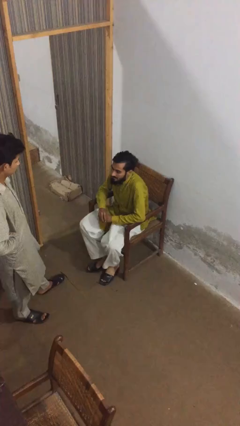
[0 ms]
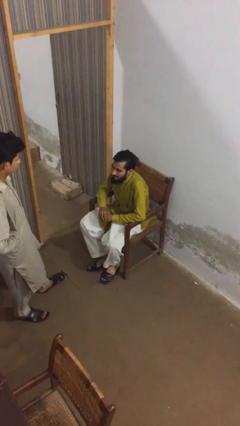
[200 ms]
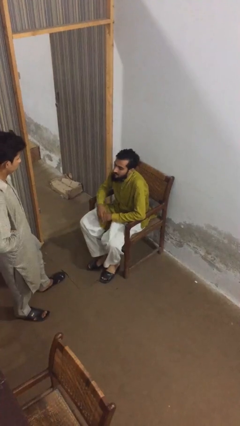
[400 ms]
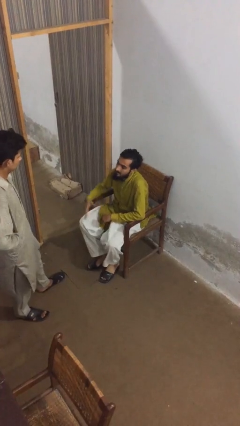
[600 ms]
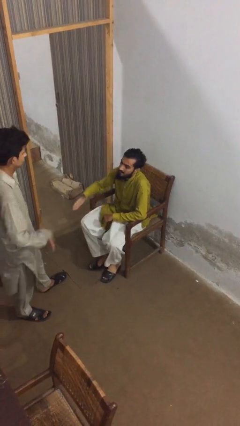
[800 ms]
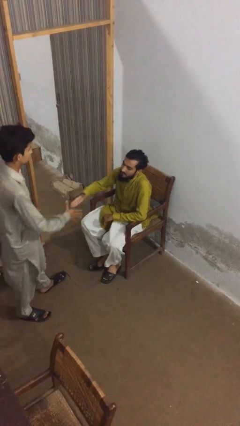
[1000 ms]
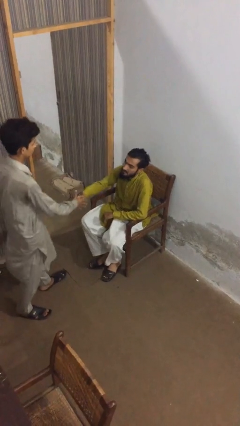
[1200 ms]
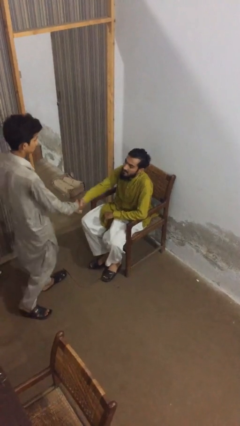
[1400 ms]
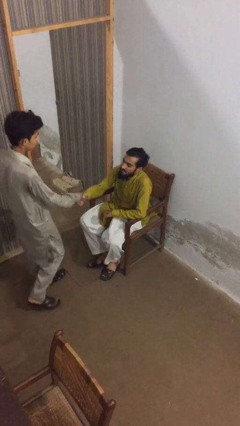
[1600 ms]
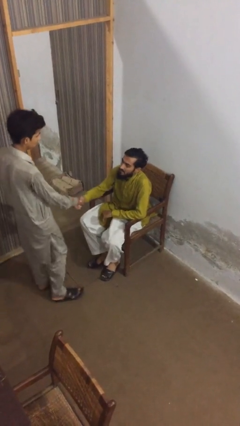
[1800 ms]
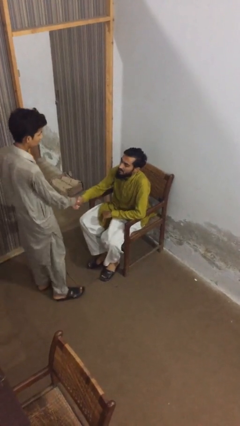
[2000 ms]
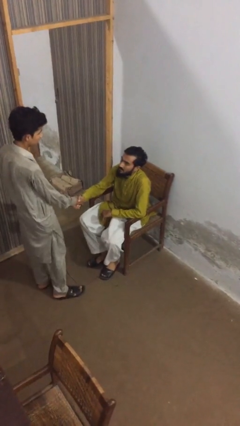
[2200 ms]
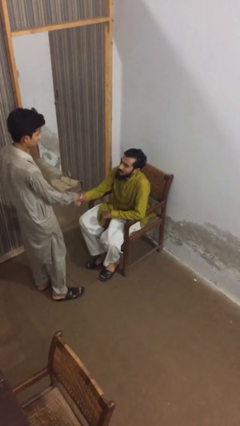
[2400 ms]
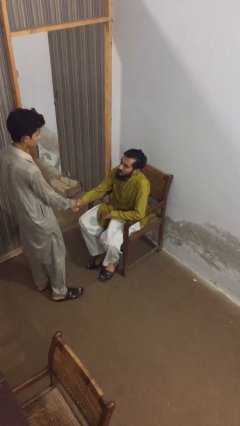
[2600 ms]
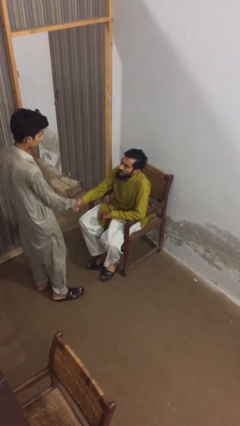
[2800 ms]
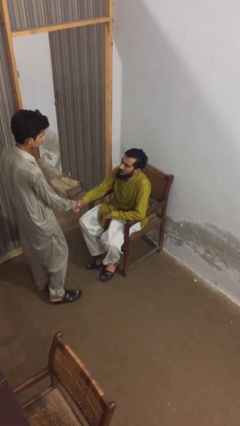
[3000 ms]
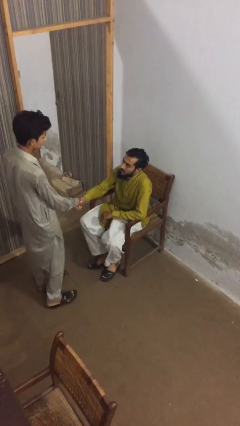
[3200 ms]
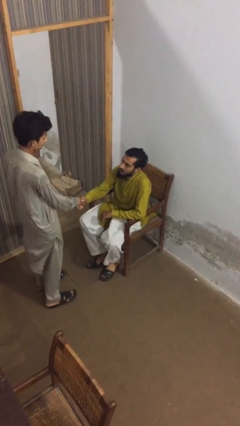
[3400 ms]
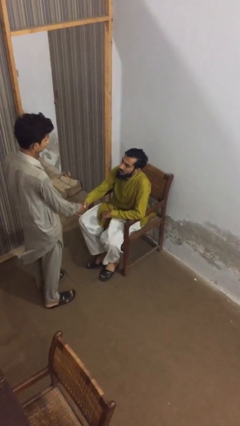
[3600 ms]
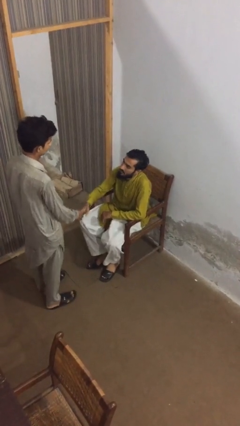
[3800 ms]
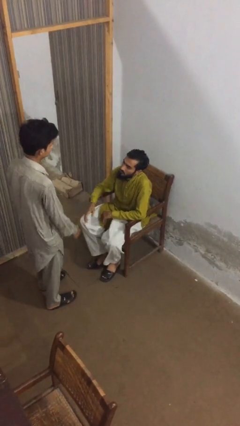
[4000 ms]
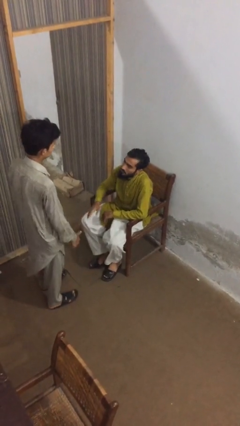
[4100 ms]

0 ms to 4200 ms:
person shakes hand

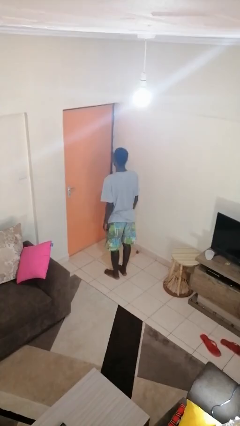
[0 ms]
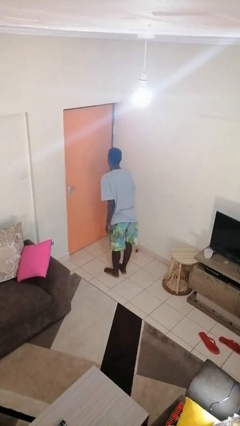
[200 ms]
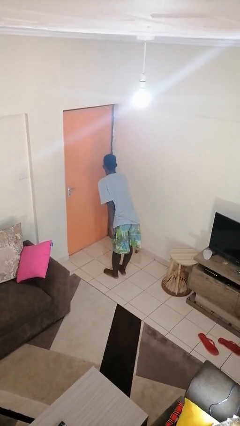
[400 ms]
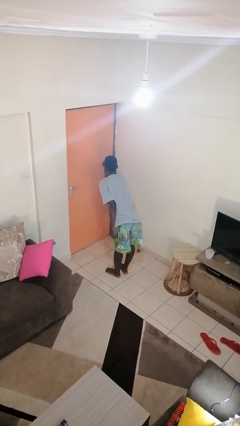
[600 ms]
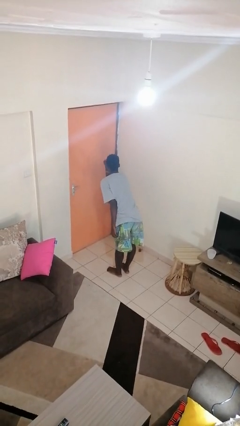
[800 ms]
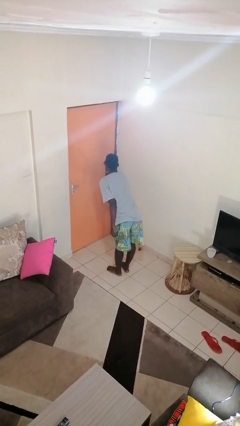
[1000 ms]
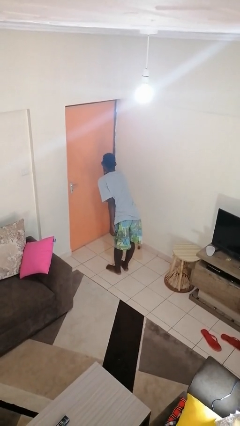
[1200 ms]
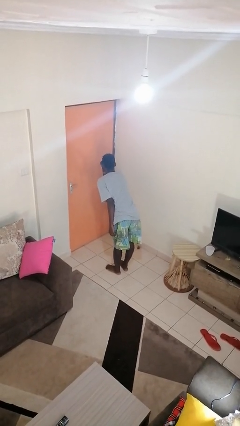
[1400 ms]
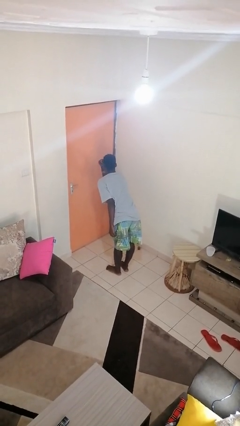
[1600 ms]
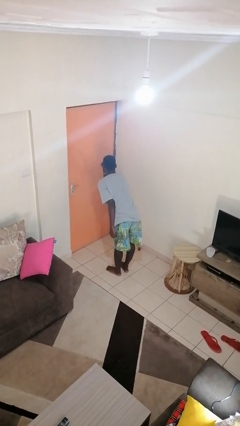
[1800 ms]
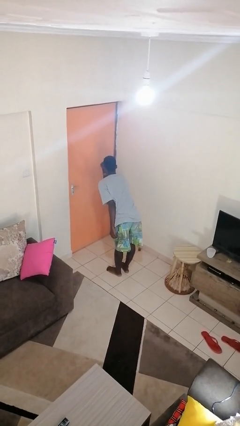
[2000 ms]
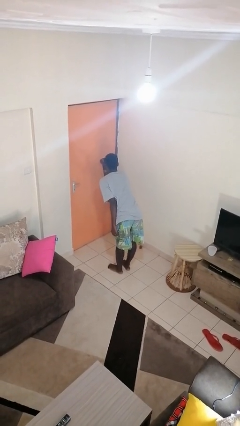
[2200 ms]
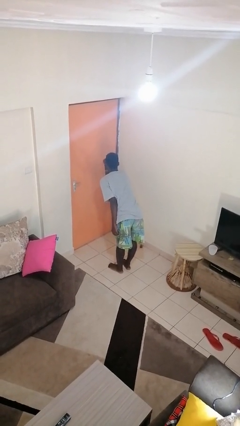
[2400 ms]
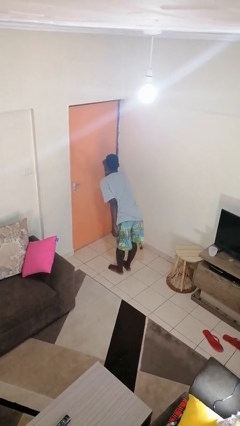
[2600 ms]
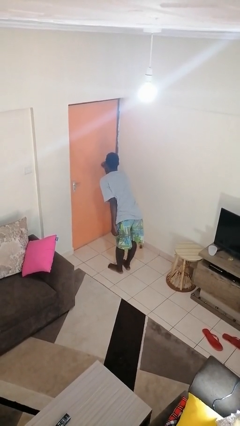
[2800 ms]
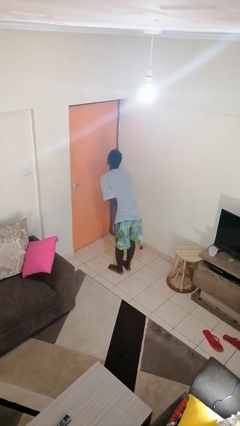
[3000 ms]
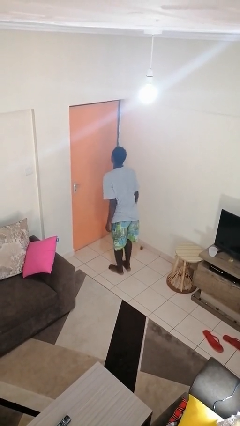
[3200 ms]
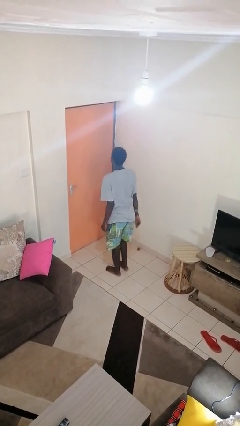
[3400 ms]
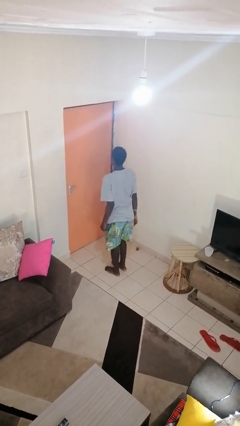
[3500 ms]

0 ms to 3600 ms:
person gestures watch closely

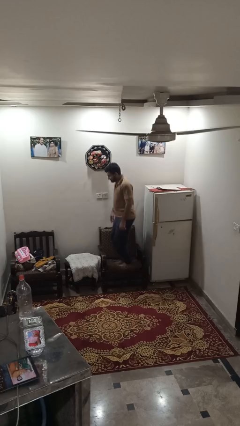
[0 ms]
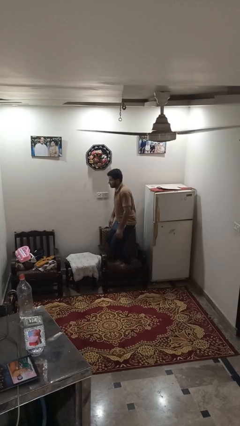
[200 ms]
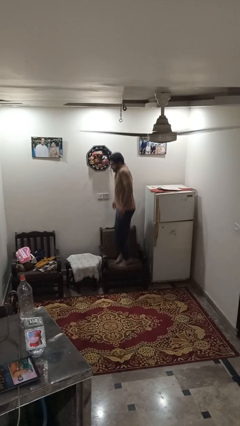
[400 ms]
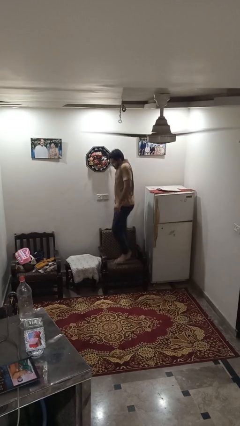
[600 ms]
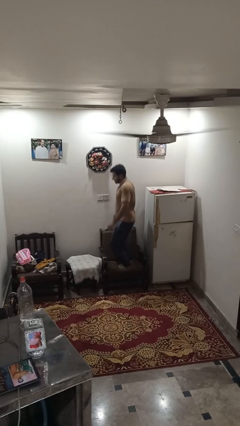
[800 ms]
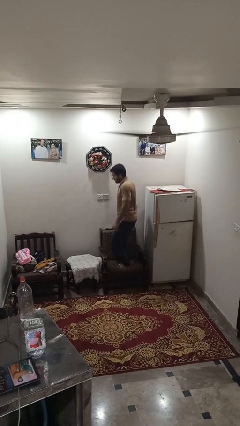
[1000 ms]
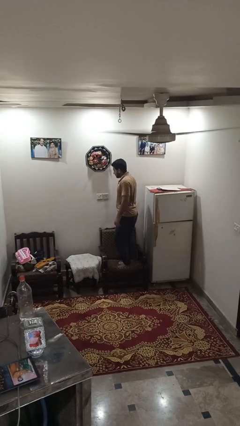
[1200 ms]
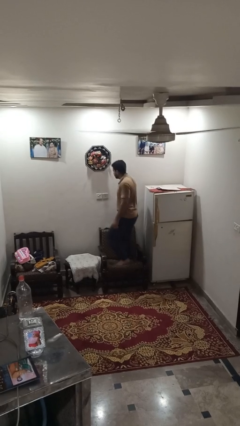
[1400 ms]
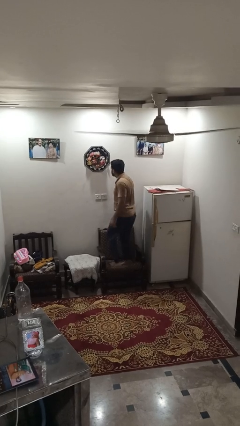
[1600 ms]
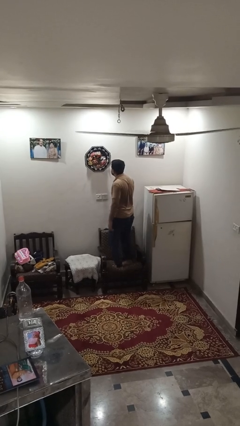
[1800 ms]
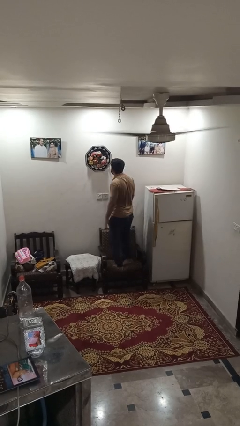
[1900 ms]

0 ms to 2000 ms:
person jumps on couch

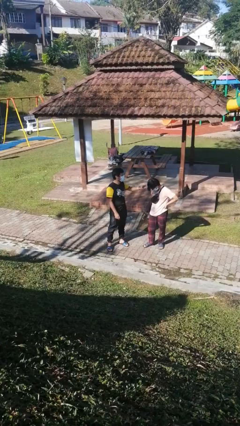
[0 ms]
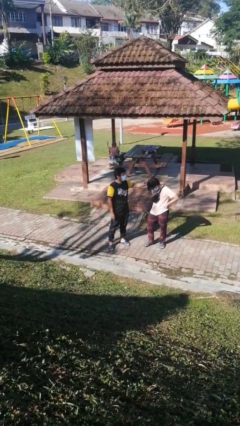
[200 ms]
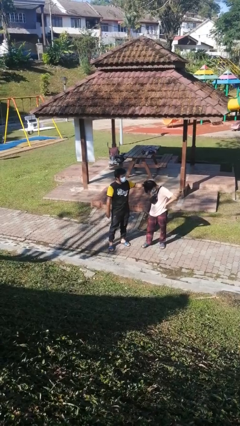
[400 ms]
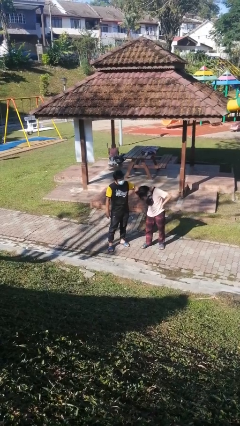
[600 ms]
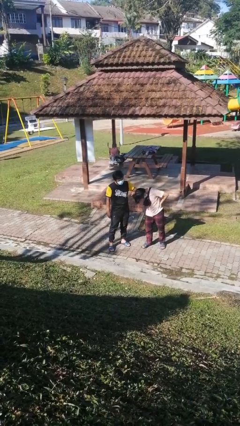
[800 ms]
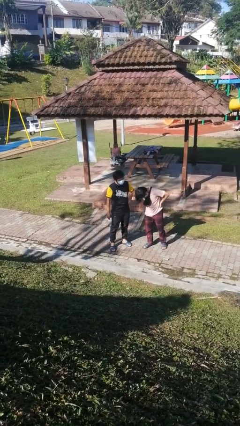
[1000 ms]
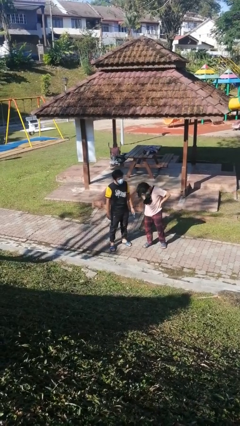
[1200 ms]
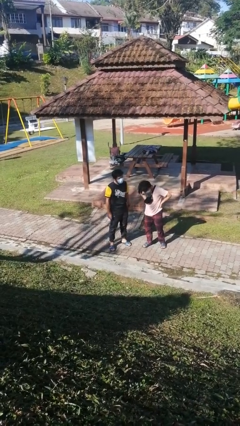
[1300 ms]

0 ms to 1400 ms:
person grabs person by hair

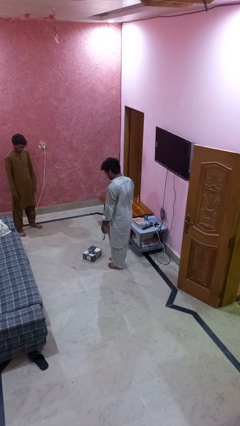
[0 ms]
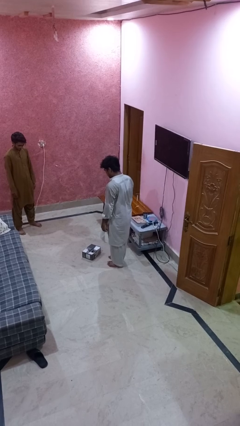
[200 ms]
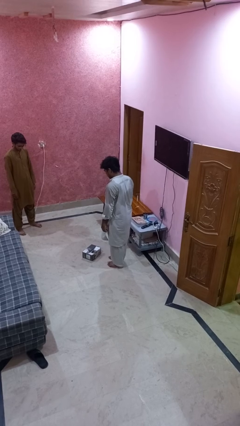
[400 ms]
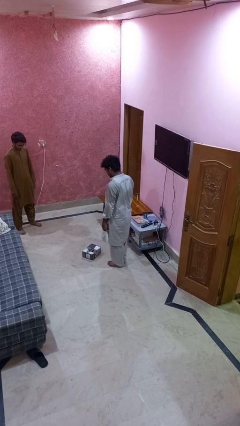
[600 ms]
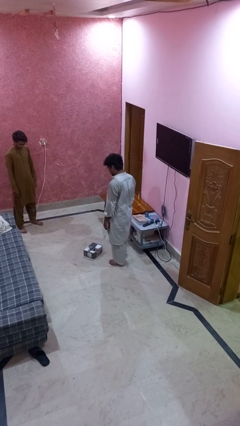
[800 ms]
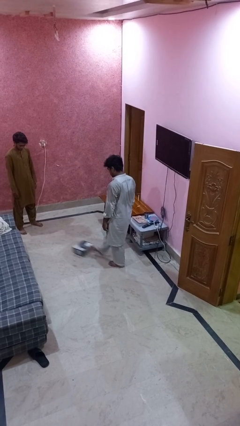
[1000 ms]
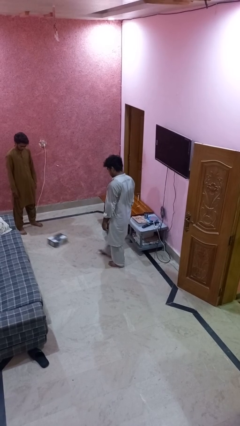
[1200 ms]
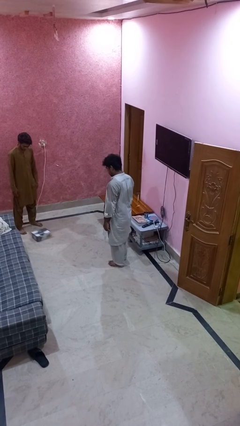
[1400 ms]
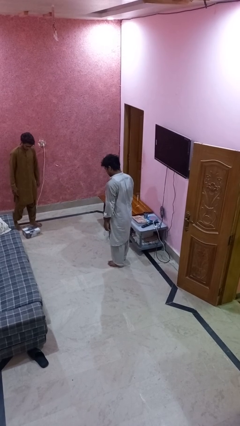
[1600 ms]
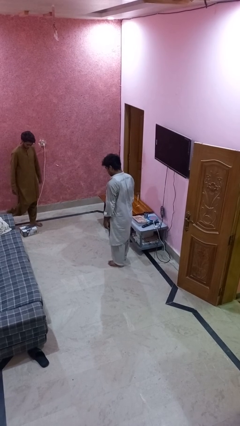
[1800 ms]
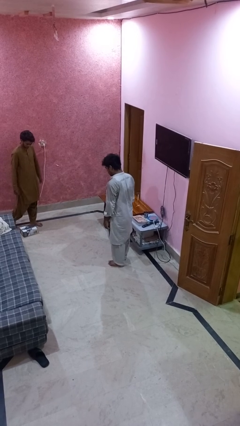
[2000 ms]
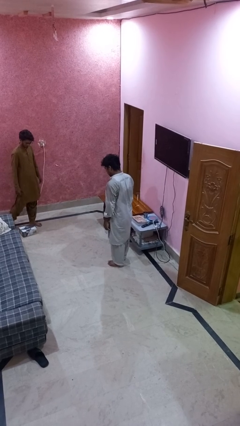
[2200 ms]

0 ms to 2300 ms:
person kicks object to person

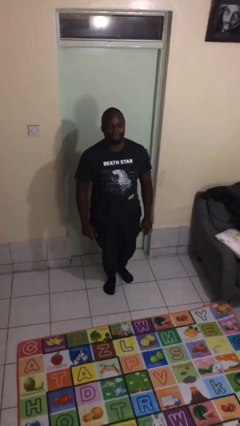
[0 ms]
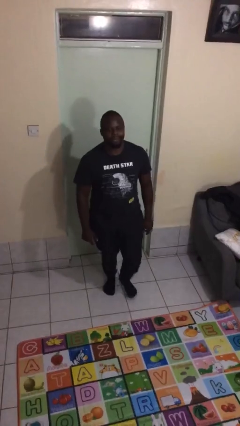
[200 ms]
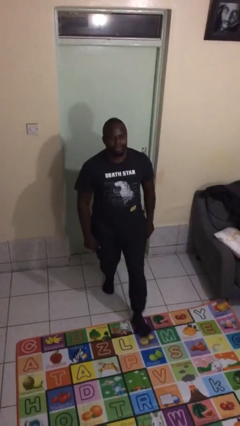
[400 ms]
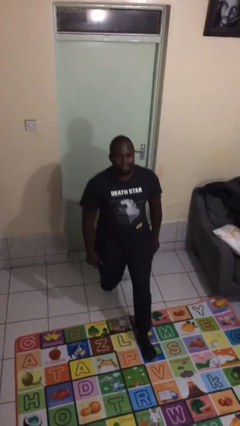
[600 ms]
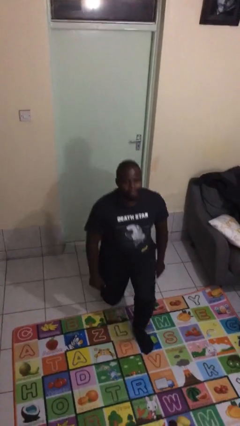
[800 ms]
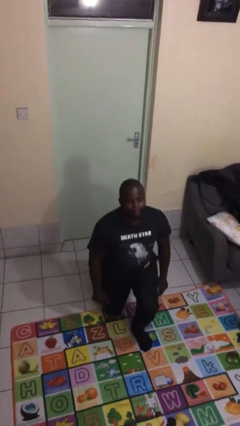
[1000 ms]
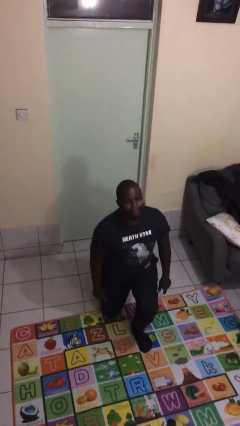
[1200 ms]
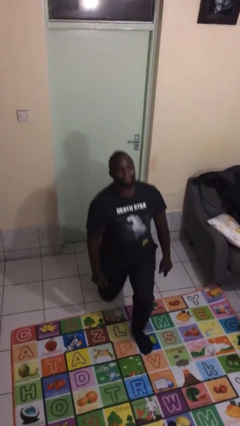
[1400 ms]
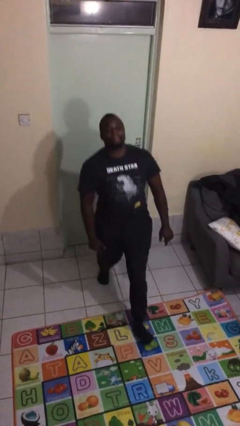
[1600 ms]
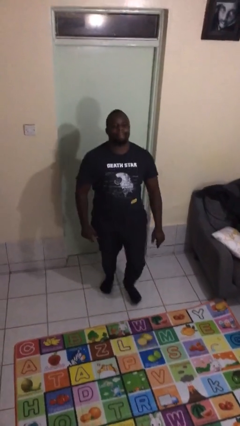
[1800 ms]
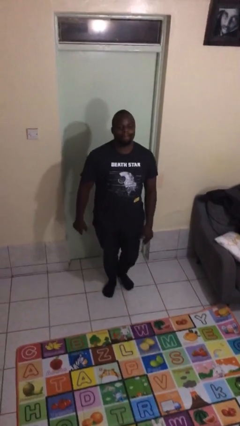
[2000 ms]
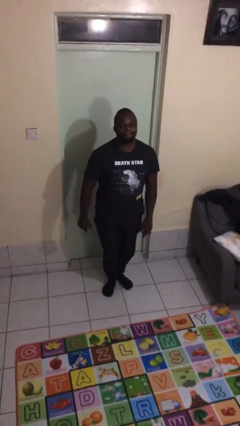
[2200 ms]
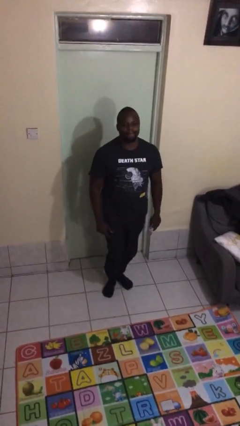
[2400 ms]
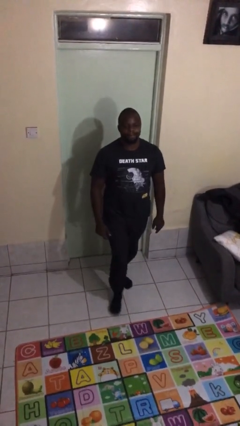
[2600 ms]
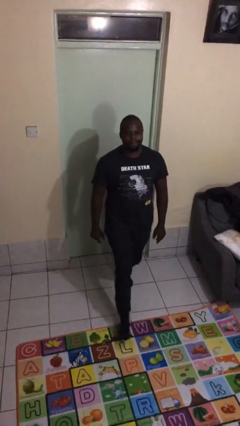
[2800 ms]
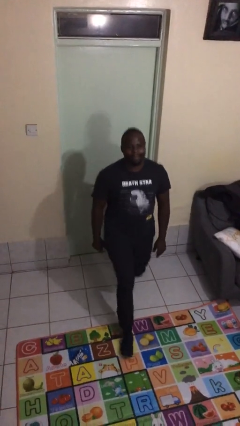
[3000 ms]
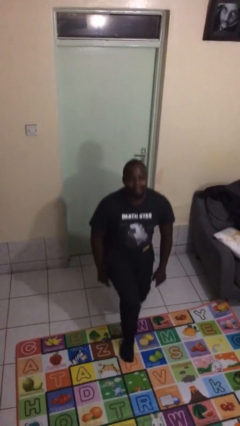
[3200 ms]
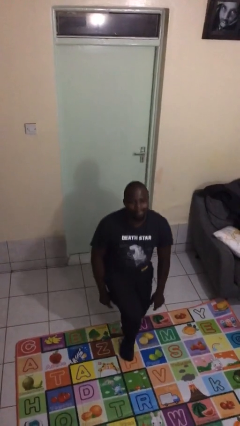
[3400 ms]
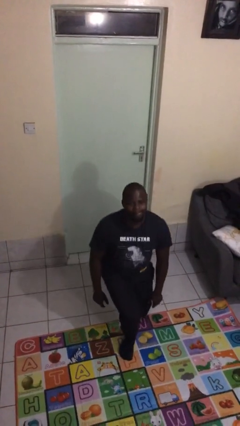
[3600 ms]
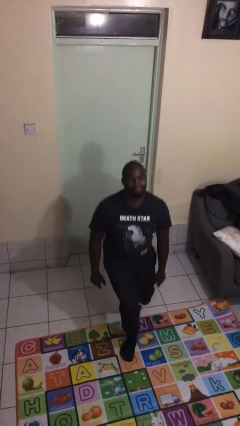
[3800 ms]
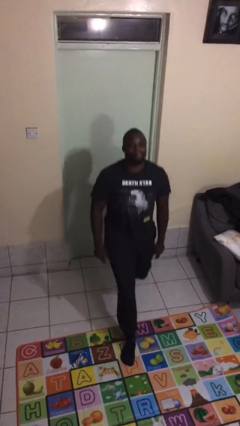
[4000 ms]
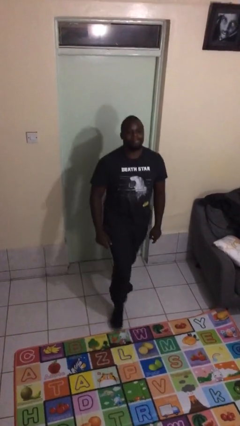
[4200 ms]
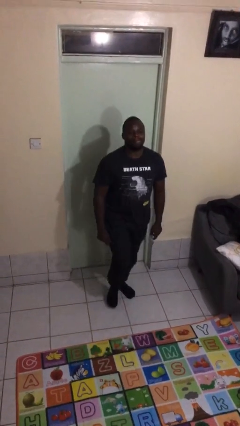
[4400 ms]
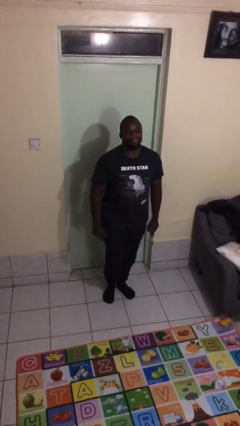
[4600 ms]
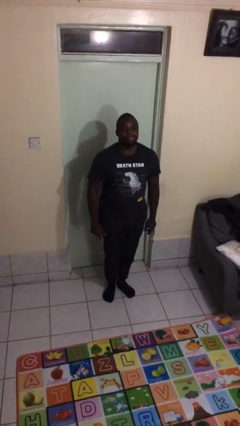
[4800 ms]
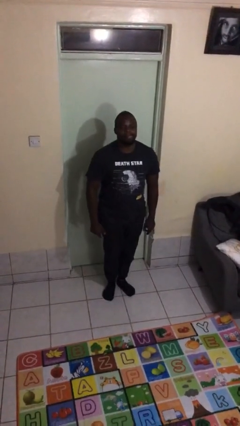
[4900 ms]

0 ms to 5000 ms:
person exercises with lunges
